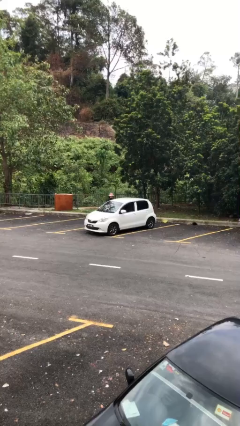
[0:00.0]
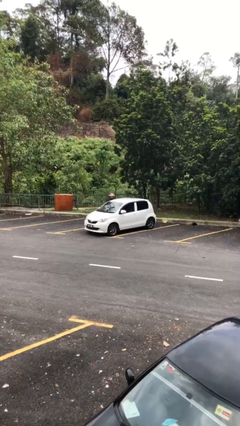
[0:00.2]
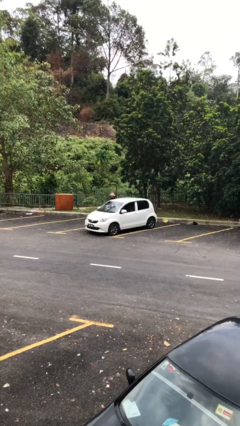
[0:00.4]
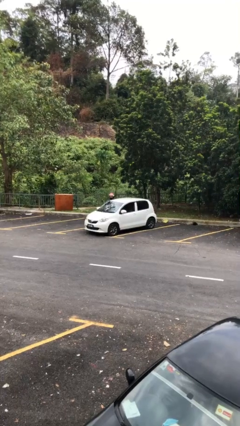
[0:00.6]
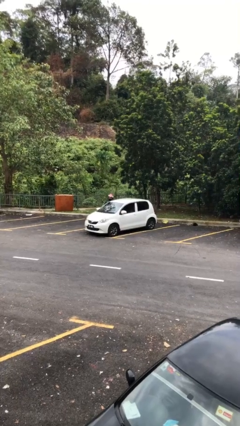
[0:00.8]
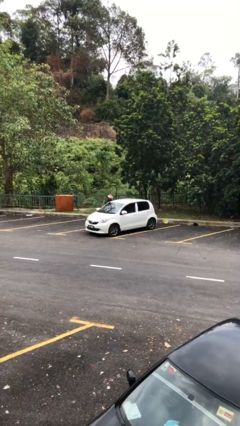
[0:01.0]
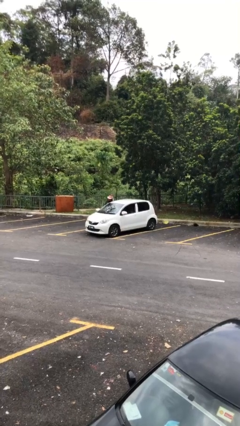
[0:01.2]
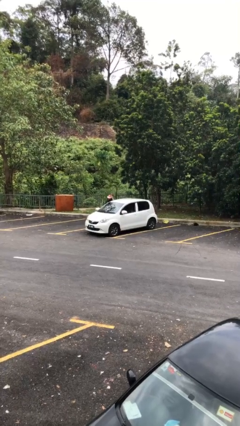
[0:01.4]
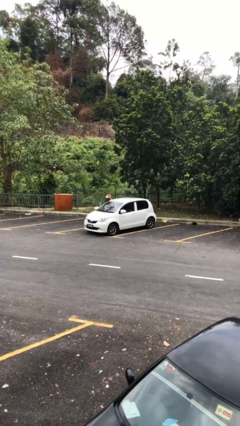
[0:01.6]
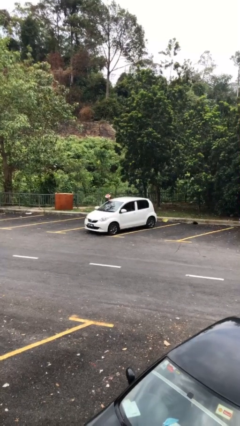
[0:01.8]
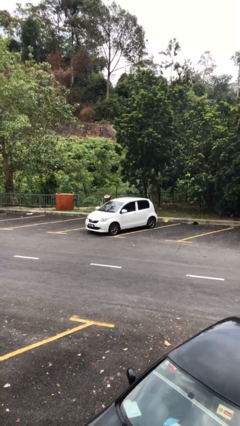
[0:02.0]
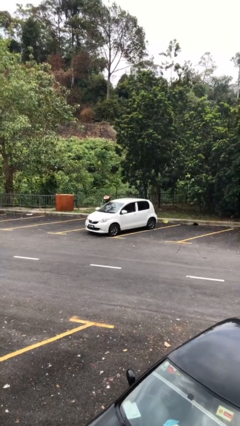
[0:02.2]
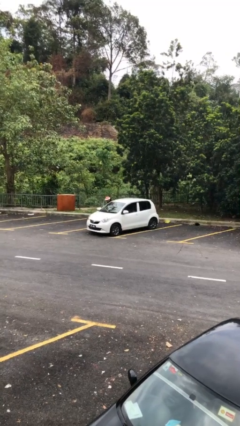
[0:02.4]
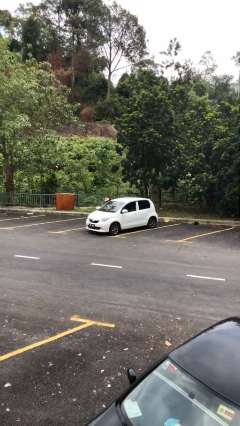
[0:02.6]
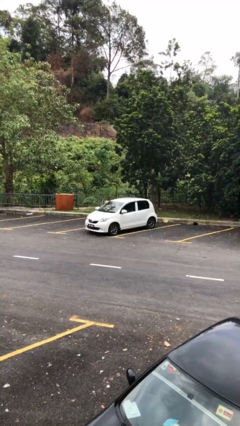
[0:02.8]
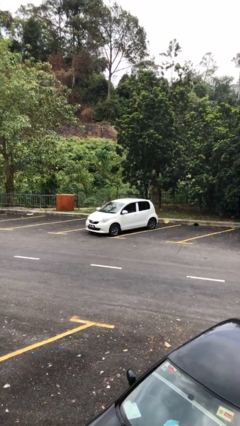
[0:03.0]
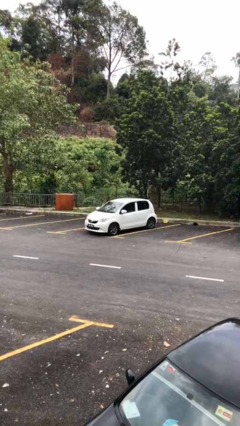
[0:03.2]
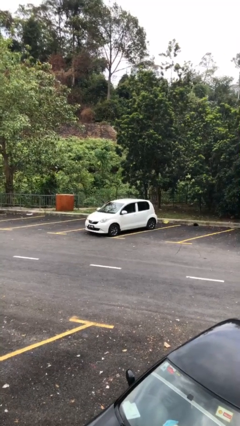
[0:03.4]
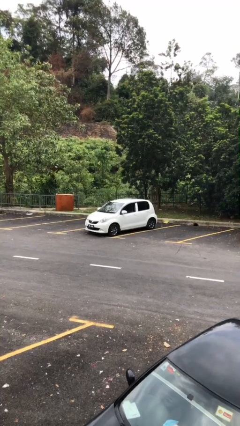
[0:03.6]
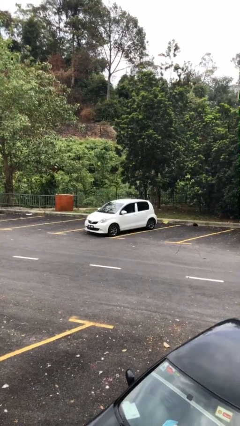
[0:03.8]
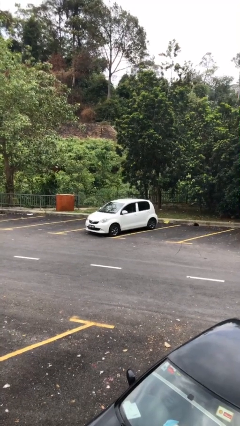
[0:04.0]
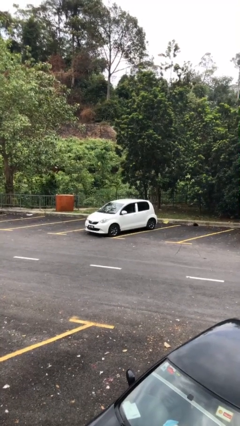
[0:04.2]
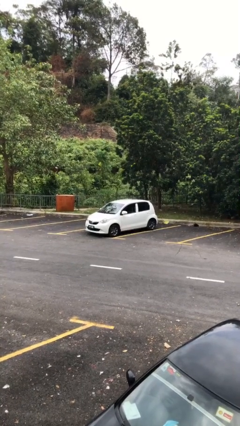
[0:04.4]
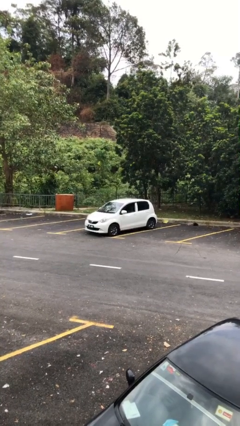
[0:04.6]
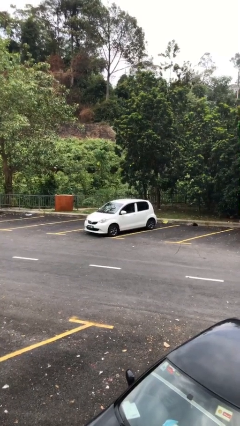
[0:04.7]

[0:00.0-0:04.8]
car picks up person

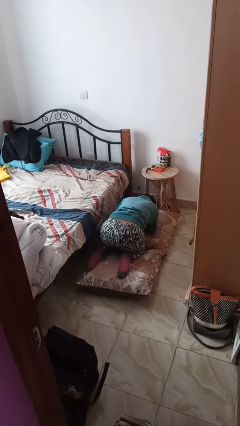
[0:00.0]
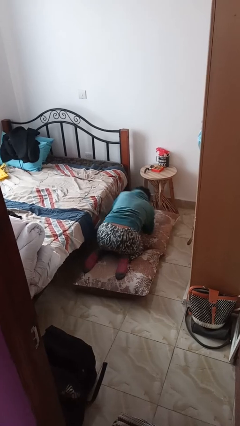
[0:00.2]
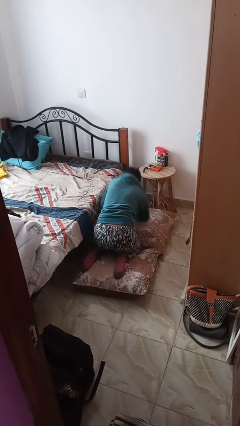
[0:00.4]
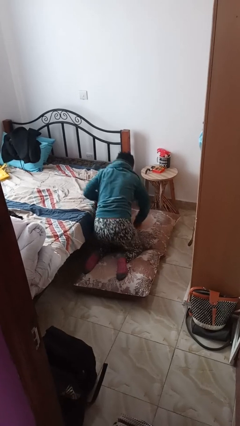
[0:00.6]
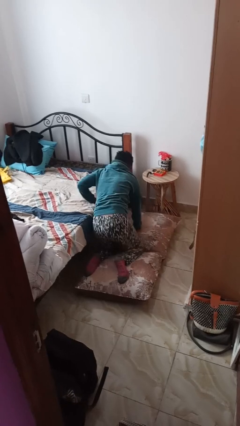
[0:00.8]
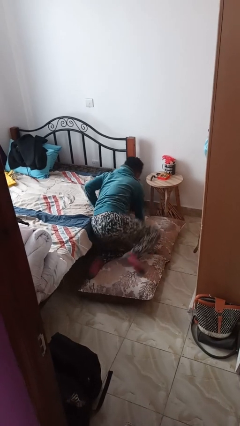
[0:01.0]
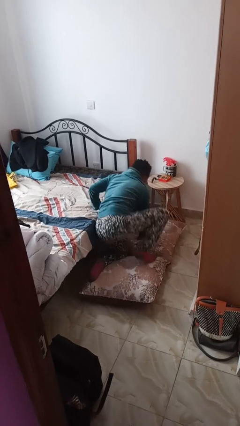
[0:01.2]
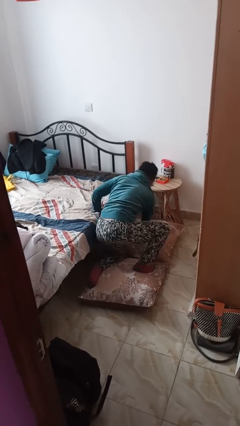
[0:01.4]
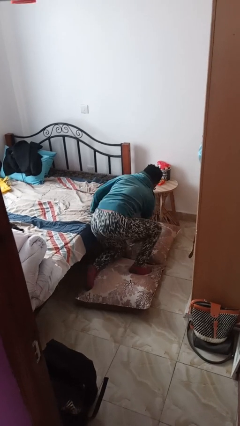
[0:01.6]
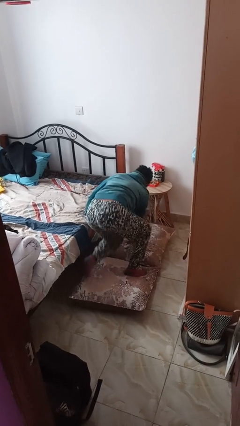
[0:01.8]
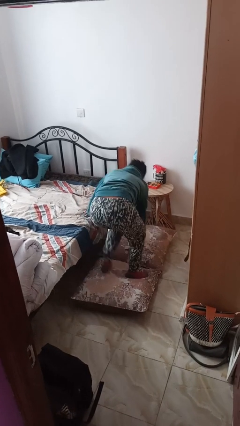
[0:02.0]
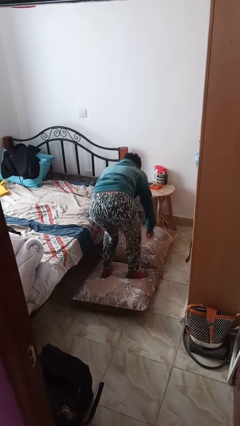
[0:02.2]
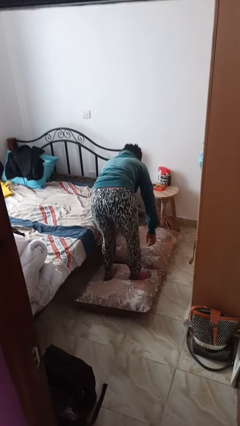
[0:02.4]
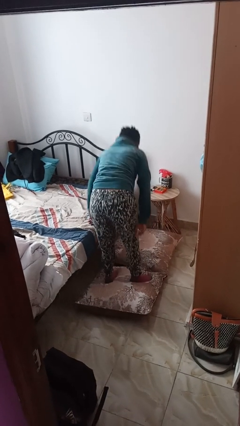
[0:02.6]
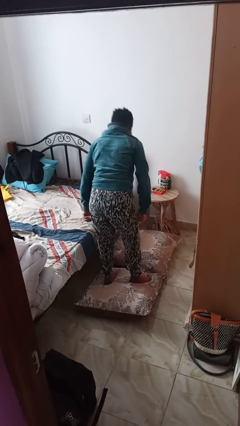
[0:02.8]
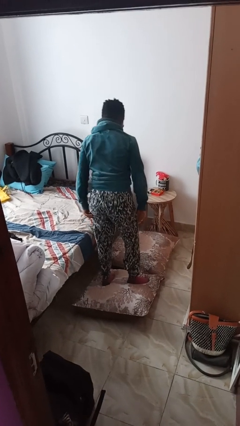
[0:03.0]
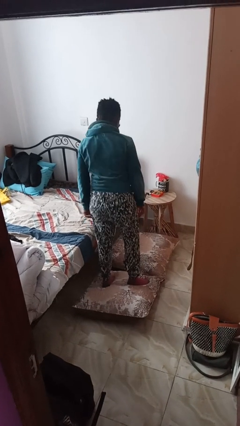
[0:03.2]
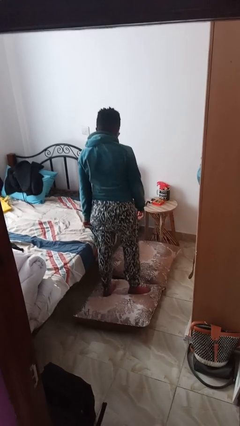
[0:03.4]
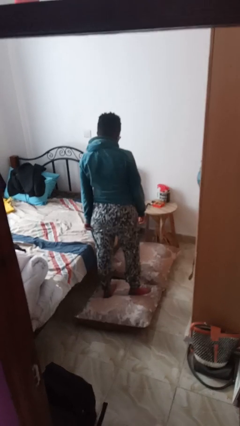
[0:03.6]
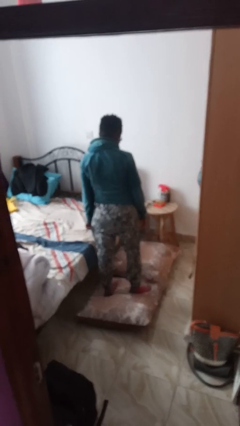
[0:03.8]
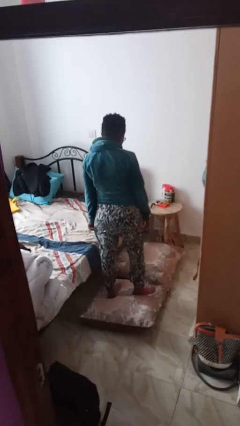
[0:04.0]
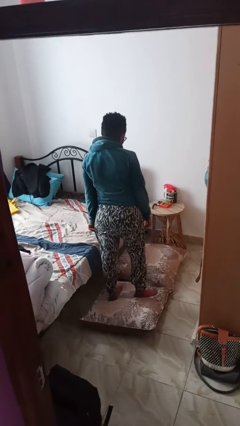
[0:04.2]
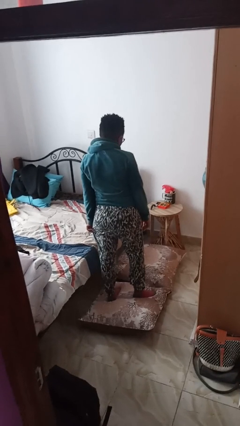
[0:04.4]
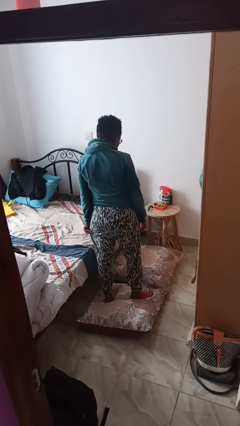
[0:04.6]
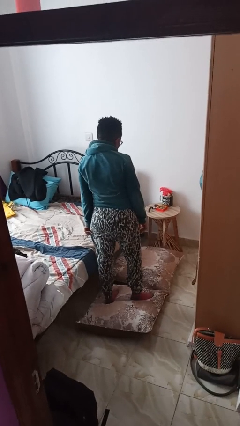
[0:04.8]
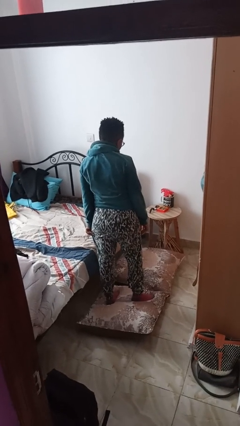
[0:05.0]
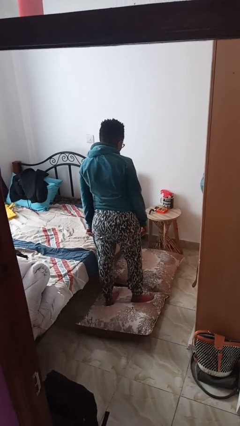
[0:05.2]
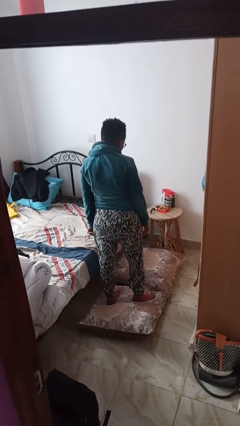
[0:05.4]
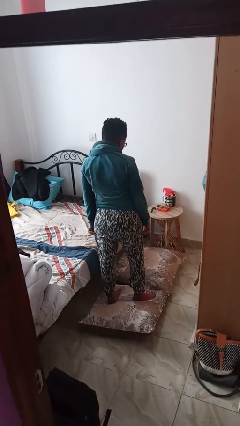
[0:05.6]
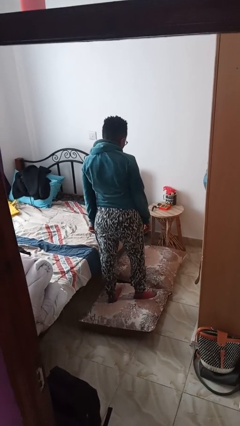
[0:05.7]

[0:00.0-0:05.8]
person stands up from floor

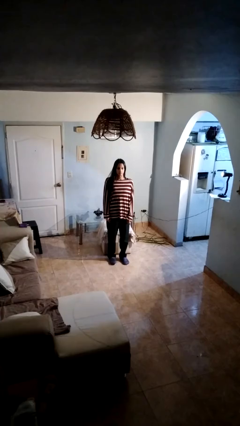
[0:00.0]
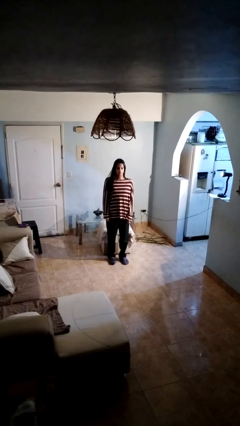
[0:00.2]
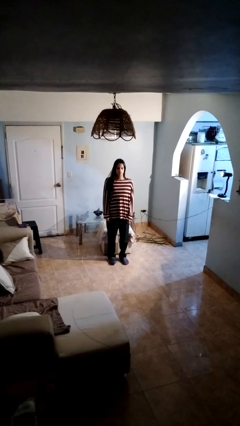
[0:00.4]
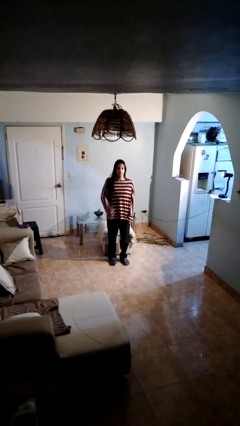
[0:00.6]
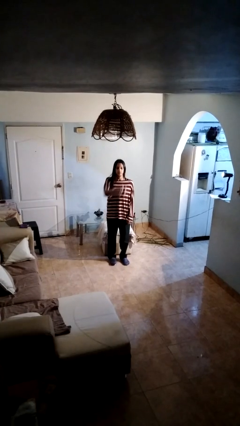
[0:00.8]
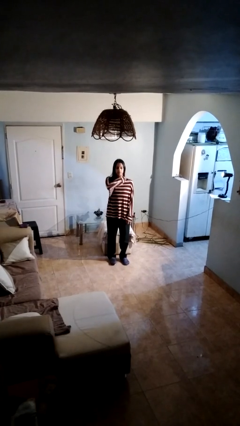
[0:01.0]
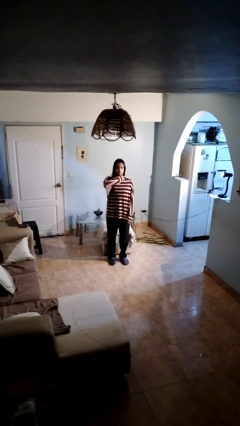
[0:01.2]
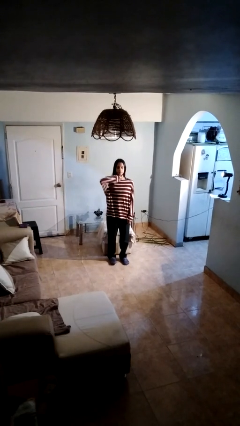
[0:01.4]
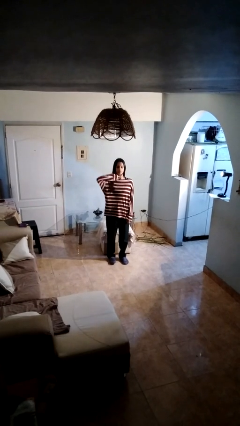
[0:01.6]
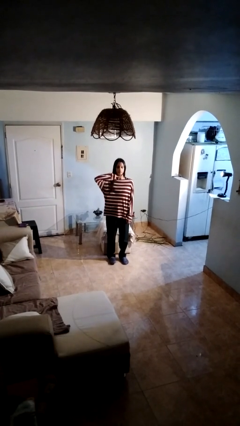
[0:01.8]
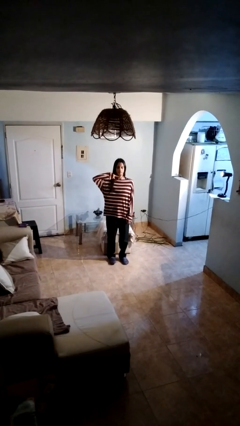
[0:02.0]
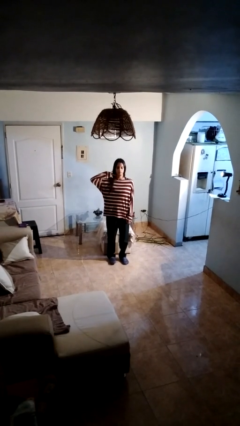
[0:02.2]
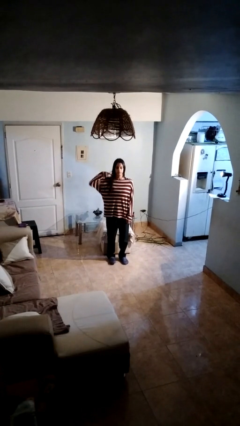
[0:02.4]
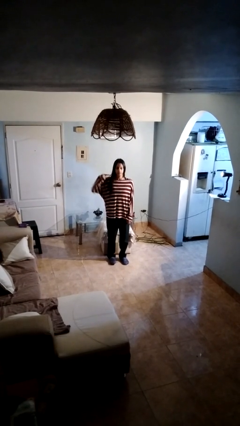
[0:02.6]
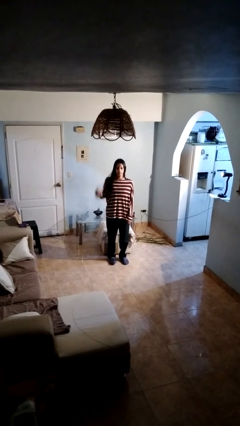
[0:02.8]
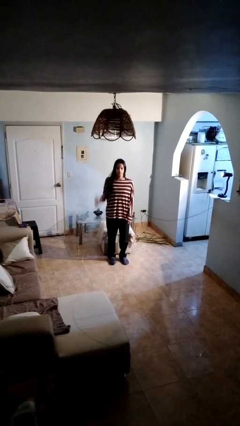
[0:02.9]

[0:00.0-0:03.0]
person gestures cut

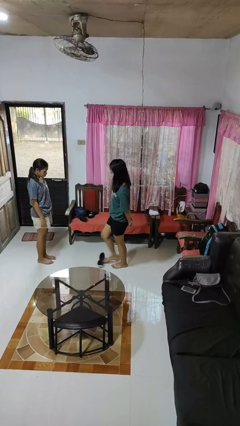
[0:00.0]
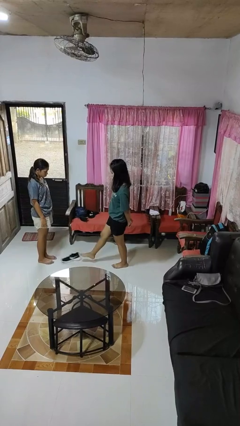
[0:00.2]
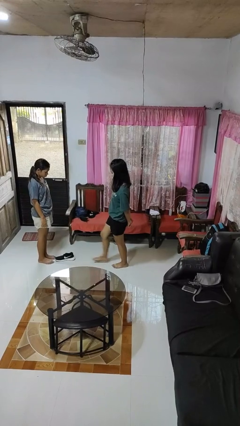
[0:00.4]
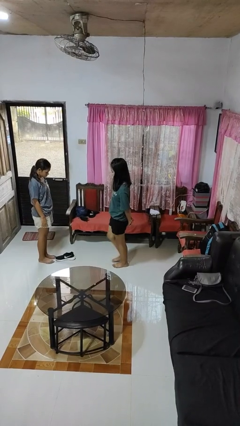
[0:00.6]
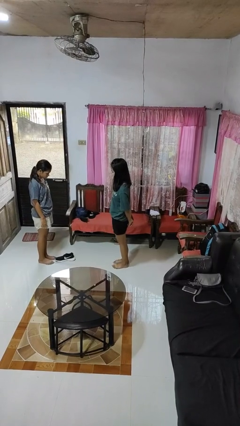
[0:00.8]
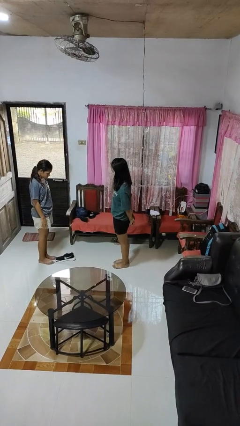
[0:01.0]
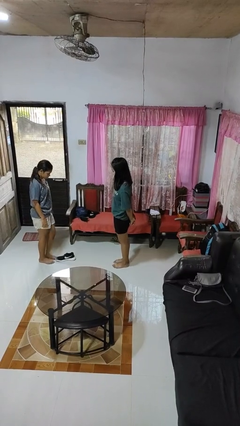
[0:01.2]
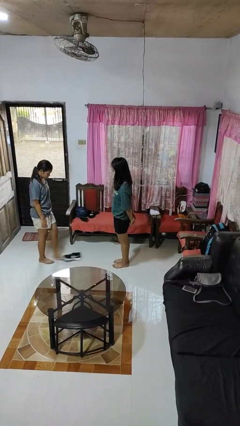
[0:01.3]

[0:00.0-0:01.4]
person kicks object to person

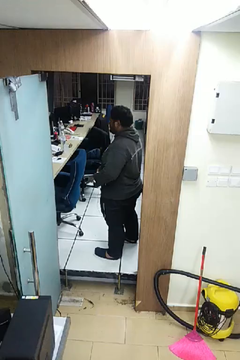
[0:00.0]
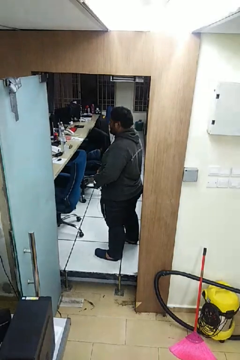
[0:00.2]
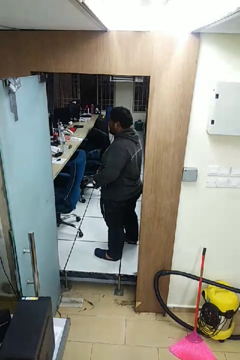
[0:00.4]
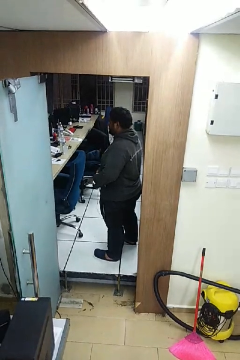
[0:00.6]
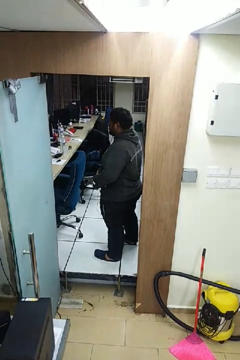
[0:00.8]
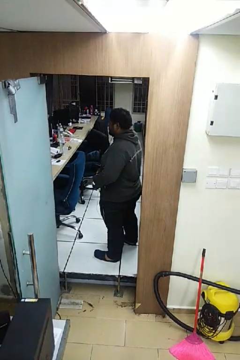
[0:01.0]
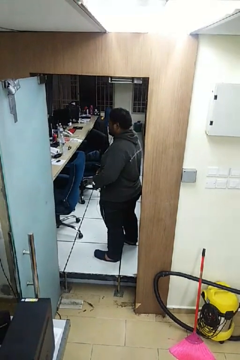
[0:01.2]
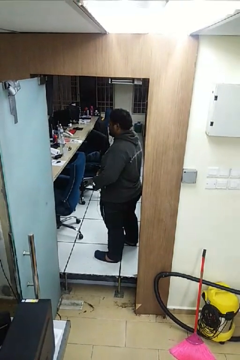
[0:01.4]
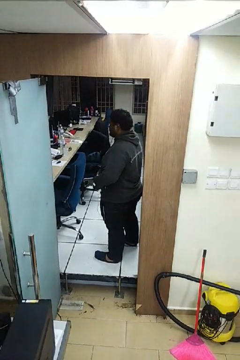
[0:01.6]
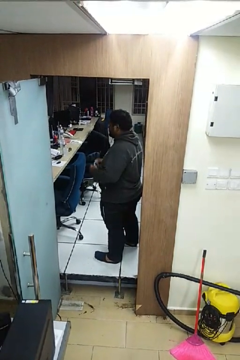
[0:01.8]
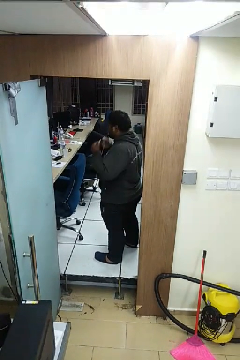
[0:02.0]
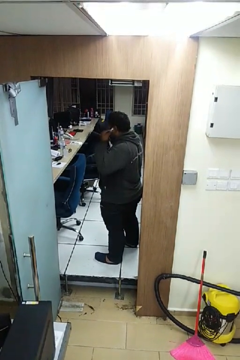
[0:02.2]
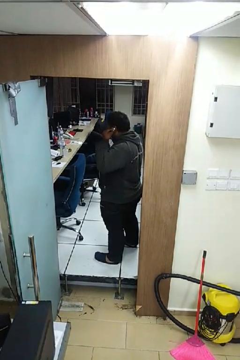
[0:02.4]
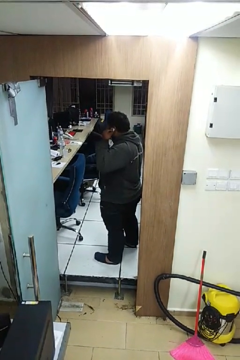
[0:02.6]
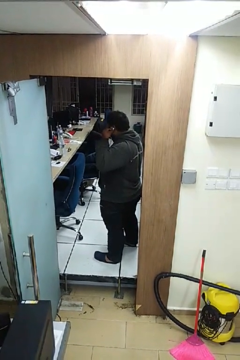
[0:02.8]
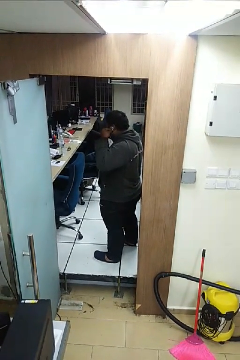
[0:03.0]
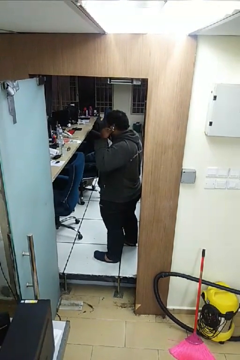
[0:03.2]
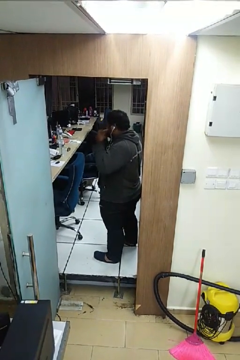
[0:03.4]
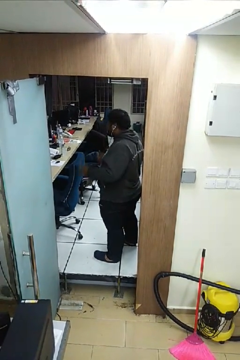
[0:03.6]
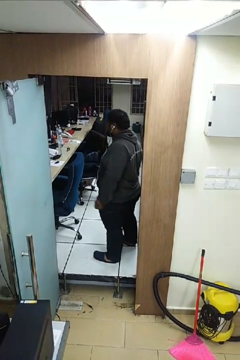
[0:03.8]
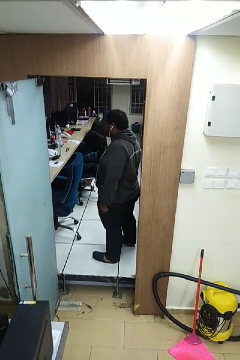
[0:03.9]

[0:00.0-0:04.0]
person puts on headphones
